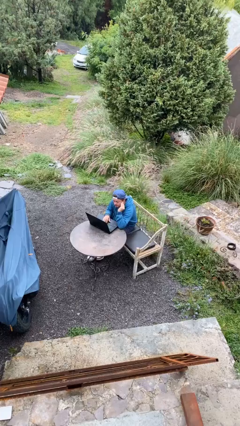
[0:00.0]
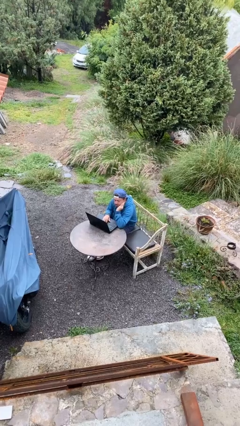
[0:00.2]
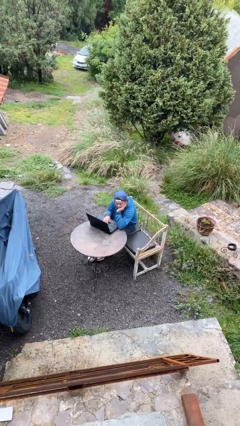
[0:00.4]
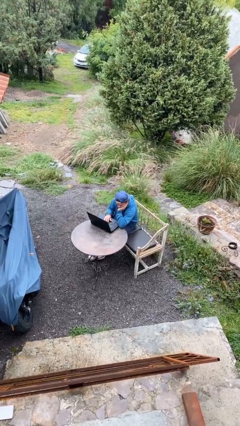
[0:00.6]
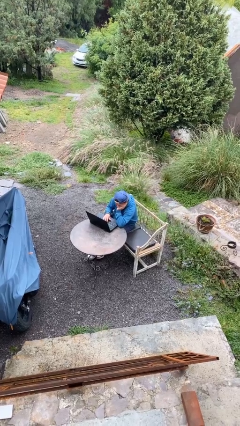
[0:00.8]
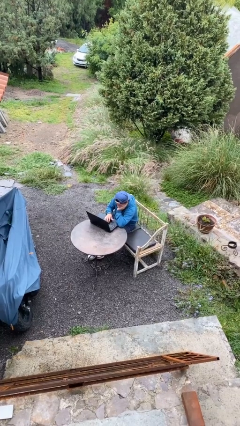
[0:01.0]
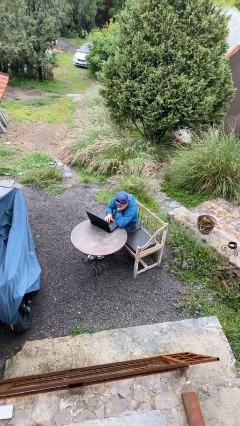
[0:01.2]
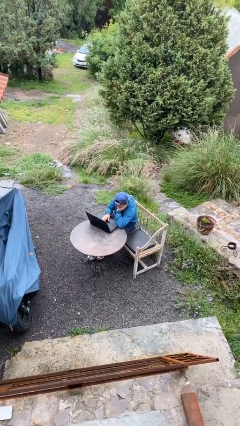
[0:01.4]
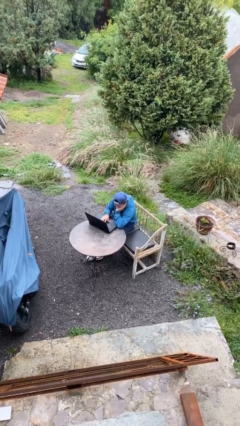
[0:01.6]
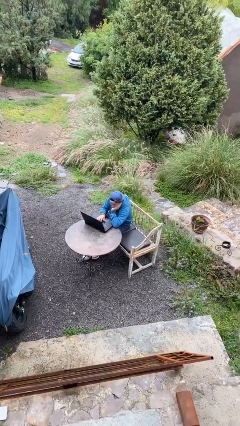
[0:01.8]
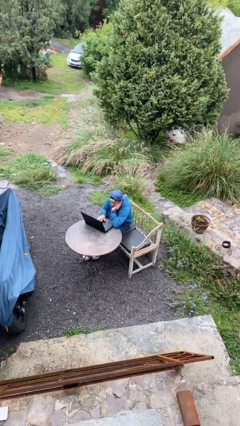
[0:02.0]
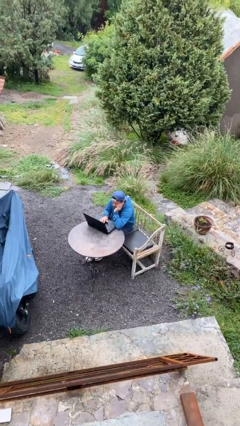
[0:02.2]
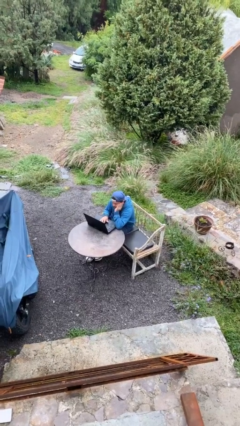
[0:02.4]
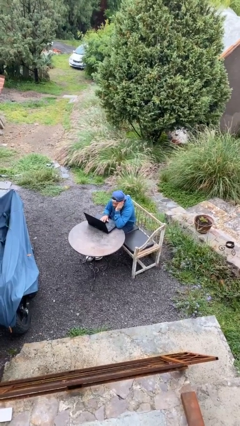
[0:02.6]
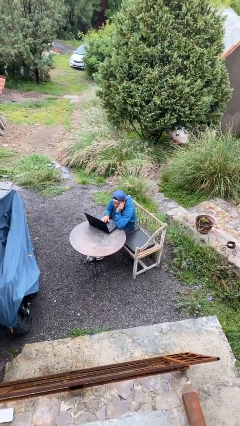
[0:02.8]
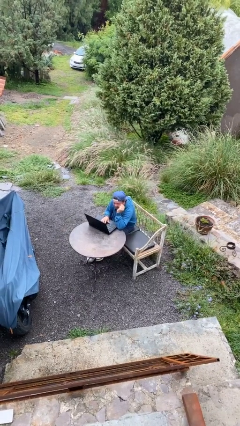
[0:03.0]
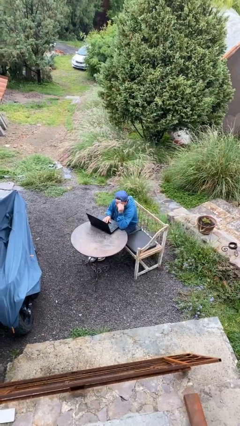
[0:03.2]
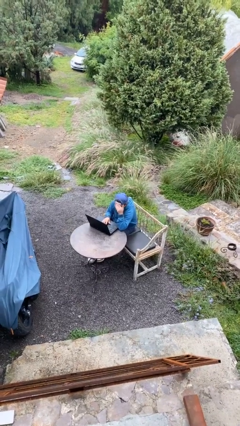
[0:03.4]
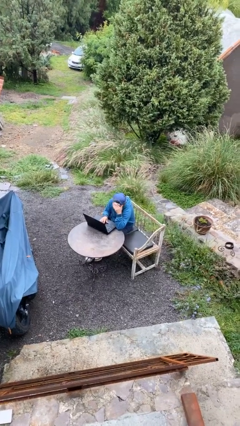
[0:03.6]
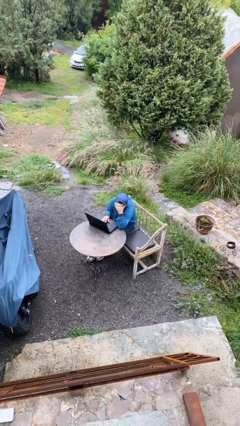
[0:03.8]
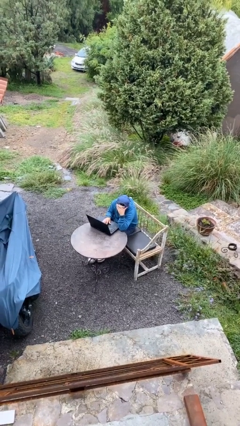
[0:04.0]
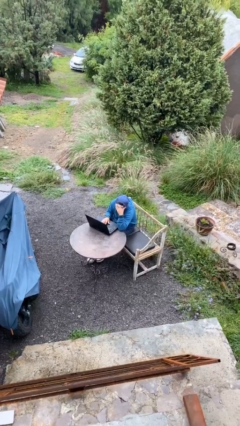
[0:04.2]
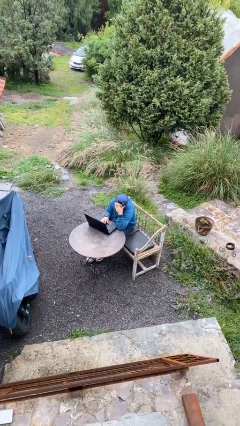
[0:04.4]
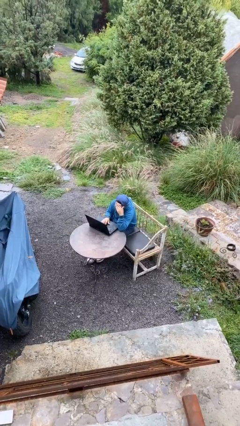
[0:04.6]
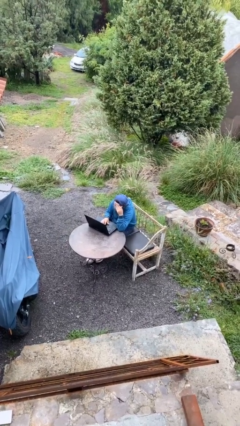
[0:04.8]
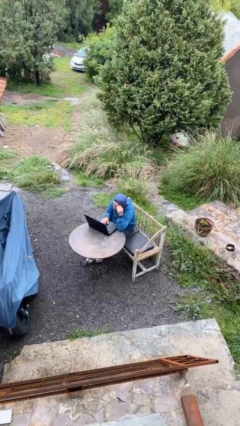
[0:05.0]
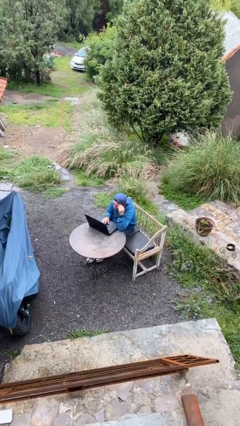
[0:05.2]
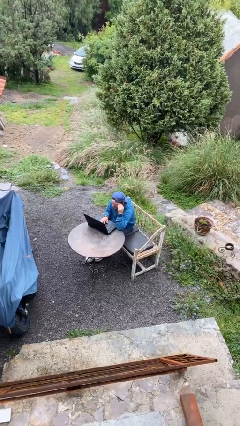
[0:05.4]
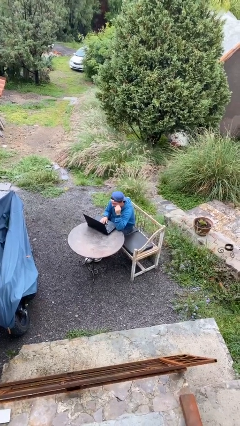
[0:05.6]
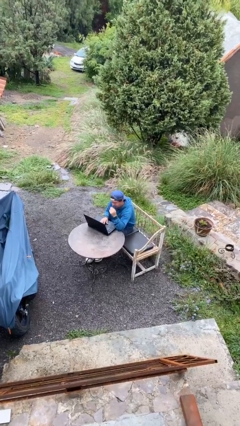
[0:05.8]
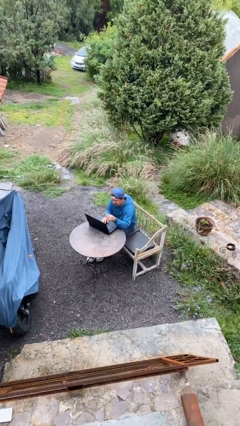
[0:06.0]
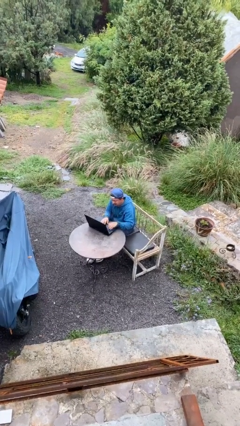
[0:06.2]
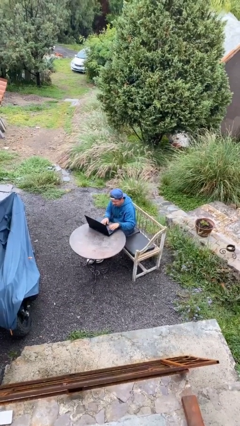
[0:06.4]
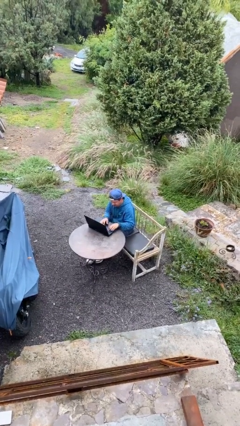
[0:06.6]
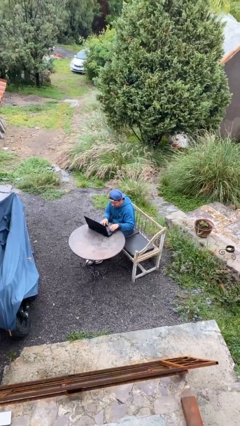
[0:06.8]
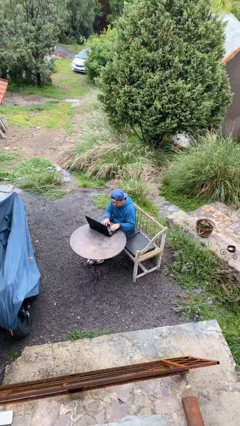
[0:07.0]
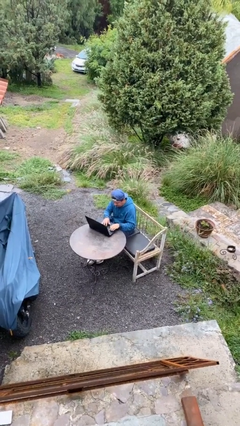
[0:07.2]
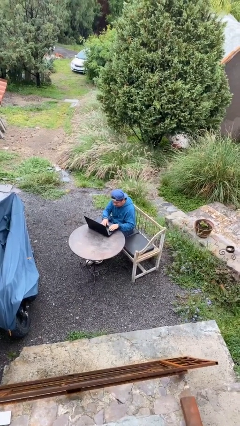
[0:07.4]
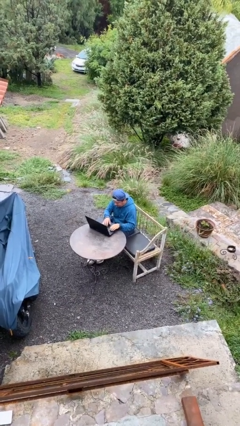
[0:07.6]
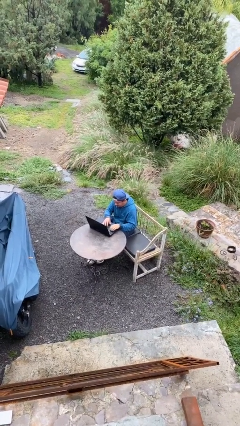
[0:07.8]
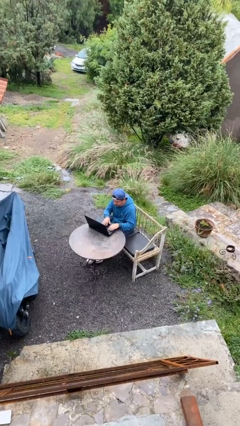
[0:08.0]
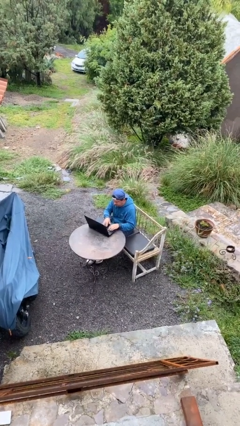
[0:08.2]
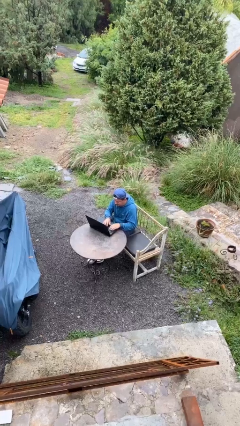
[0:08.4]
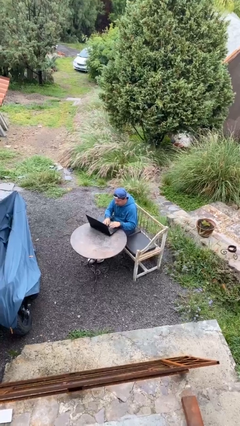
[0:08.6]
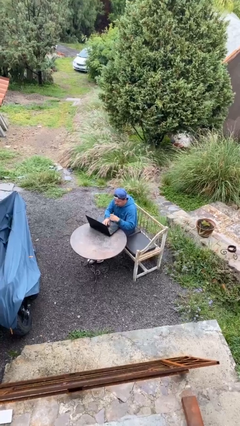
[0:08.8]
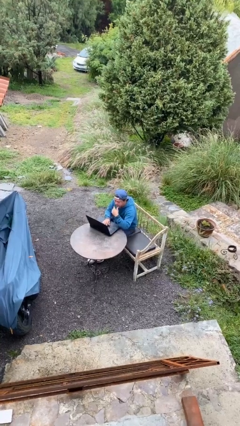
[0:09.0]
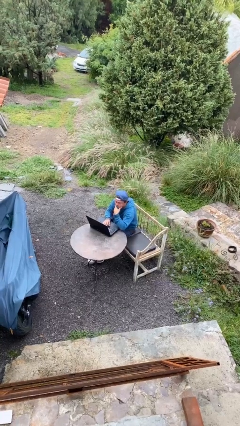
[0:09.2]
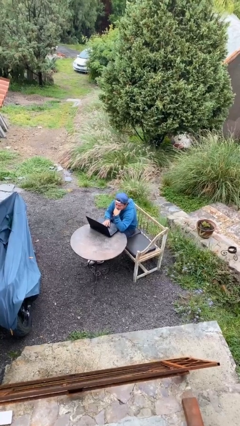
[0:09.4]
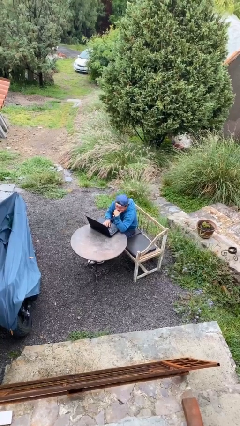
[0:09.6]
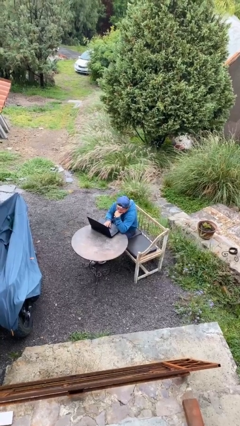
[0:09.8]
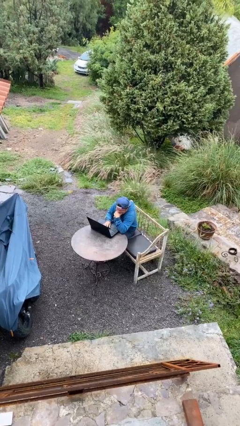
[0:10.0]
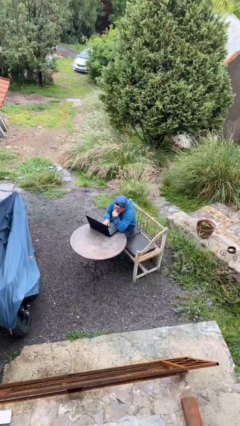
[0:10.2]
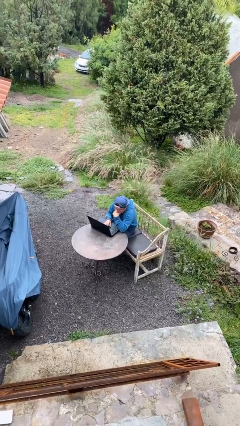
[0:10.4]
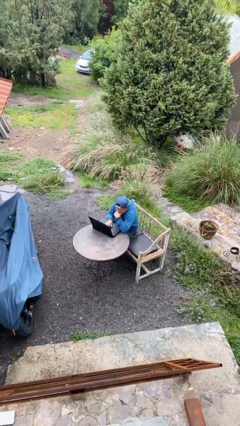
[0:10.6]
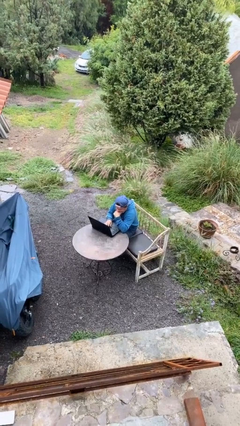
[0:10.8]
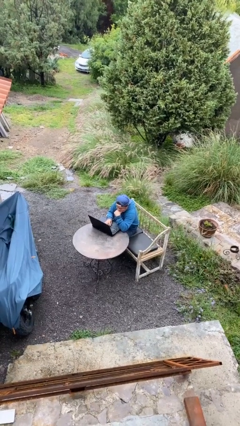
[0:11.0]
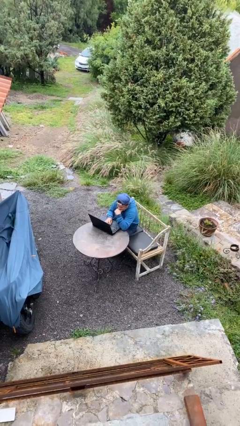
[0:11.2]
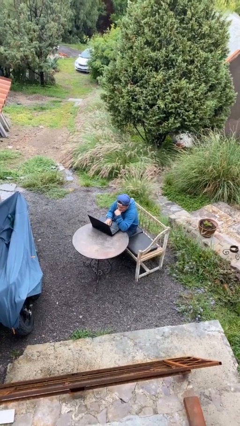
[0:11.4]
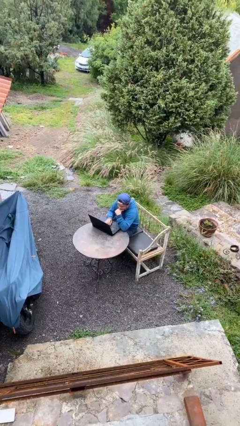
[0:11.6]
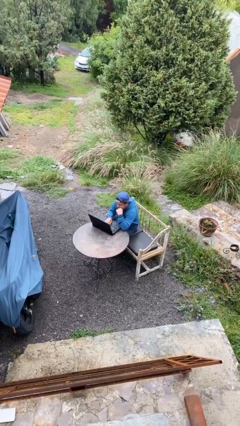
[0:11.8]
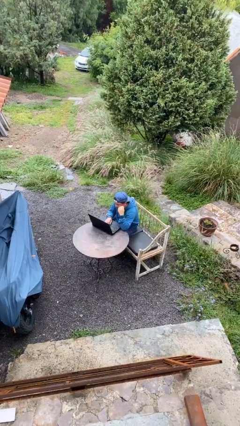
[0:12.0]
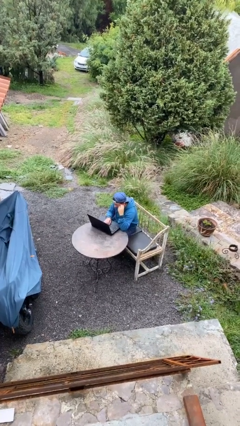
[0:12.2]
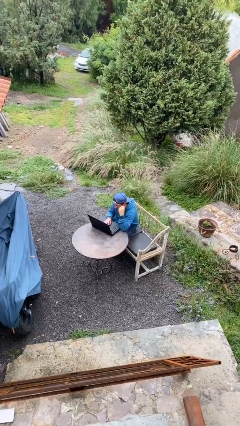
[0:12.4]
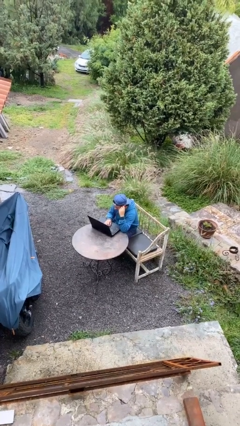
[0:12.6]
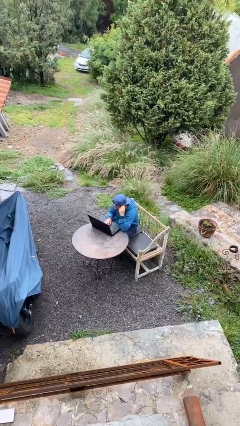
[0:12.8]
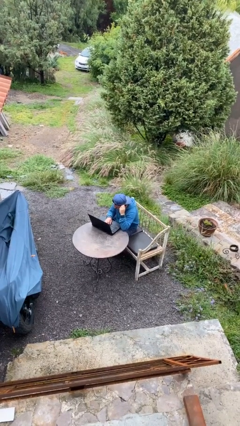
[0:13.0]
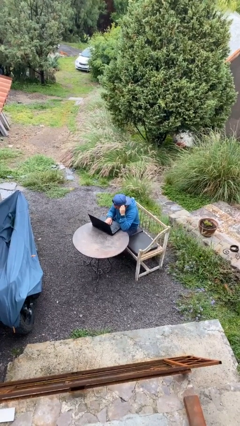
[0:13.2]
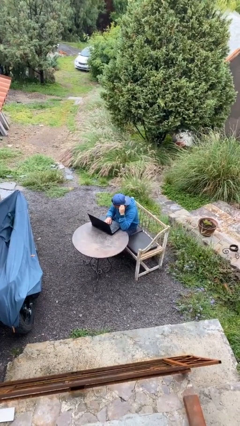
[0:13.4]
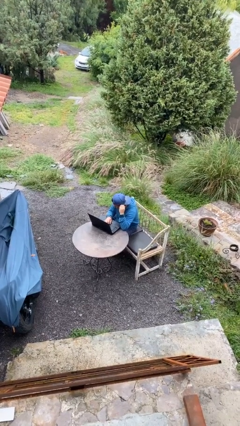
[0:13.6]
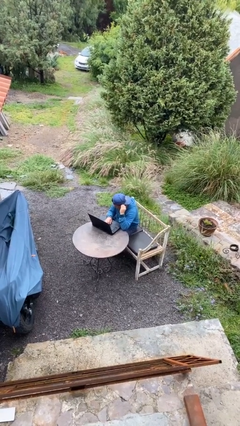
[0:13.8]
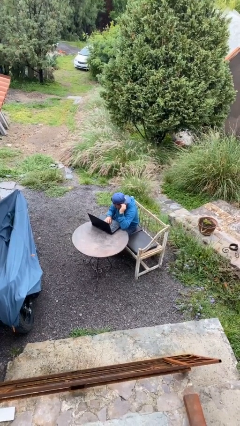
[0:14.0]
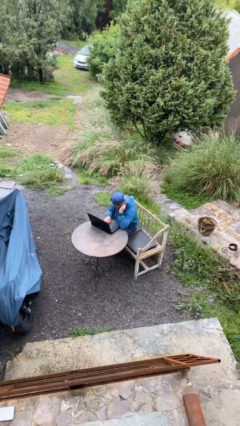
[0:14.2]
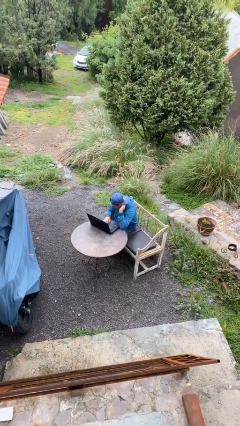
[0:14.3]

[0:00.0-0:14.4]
person interacts with laptop

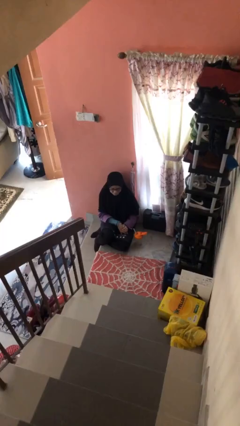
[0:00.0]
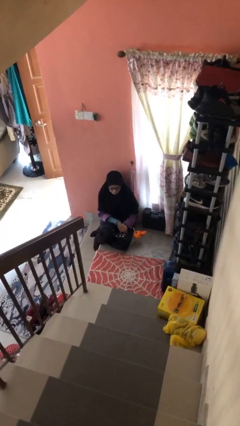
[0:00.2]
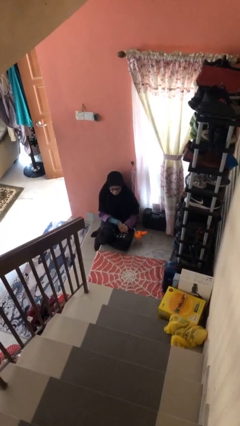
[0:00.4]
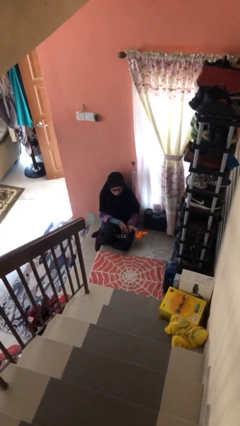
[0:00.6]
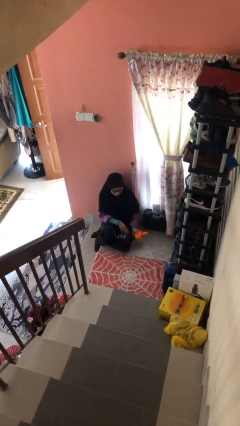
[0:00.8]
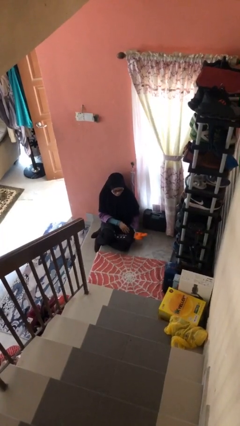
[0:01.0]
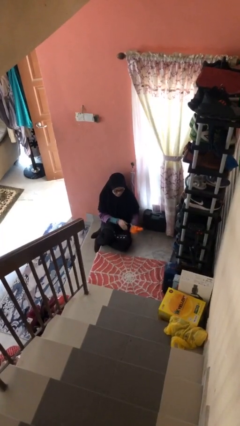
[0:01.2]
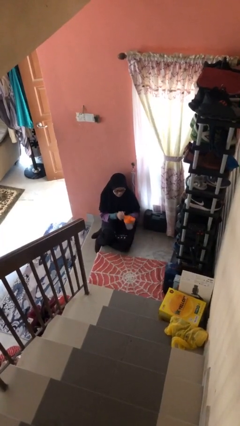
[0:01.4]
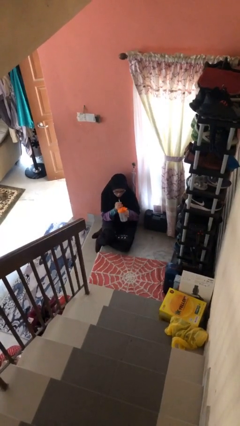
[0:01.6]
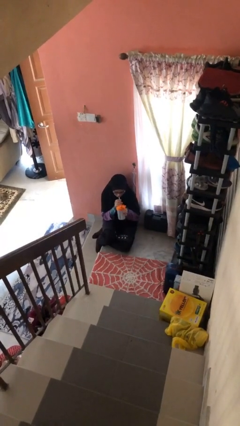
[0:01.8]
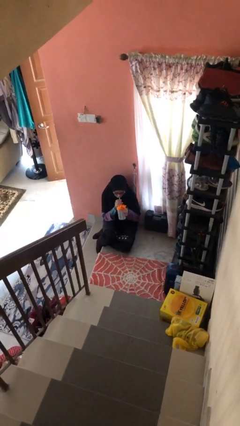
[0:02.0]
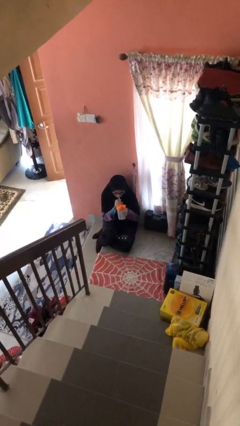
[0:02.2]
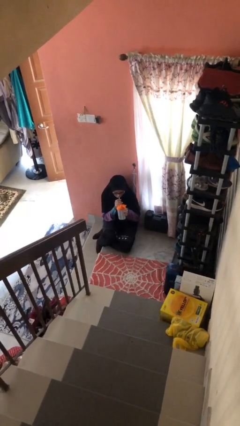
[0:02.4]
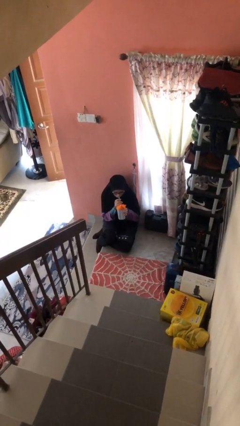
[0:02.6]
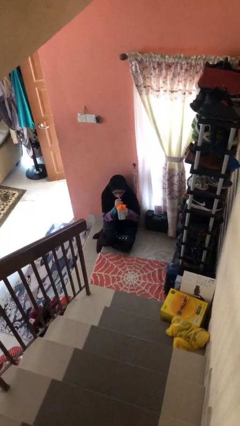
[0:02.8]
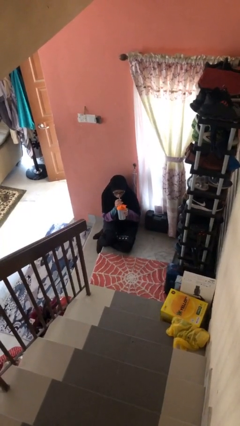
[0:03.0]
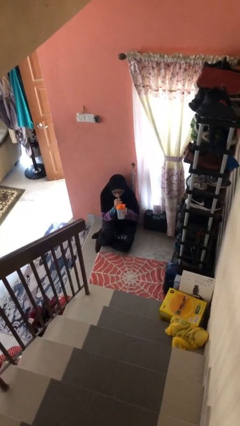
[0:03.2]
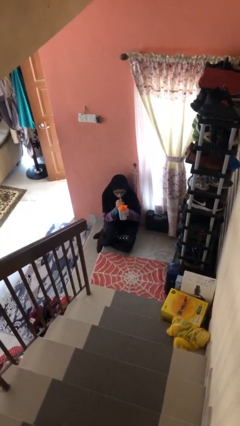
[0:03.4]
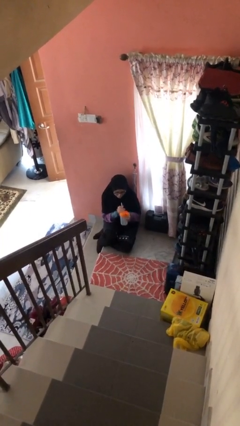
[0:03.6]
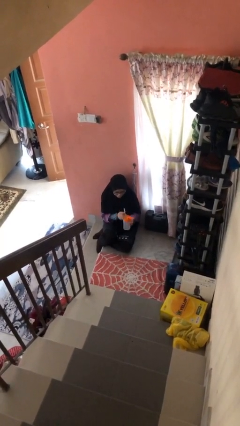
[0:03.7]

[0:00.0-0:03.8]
person drinks from straw
